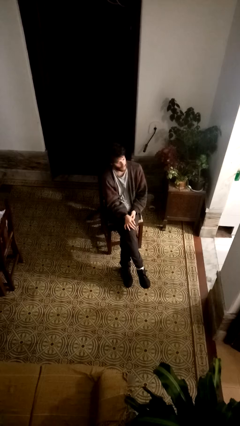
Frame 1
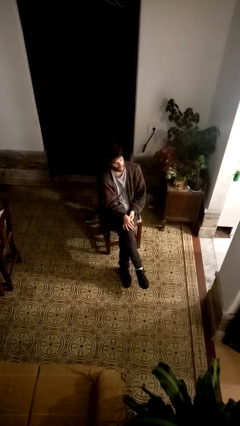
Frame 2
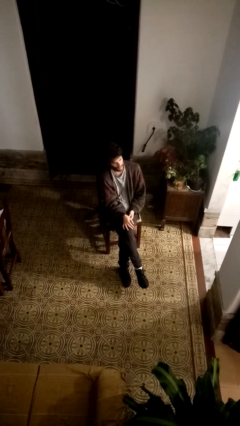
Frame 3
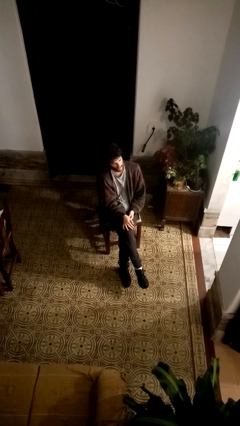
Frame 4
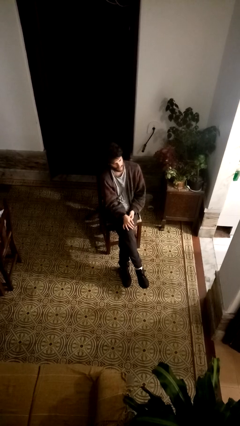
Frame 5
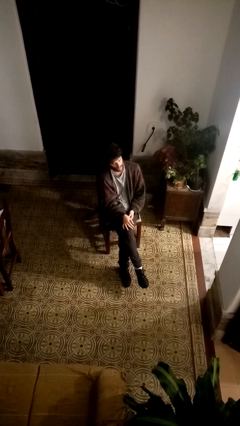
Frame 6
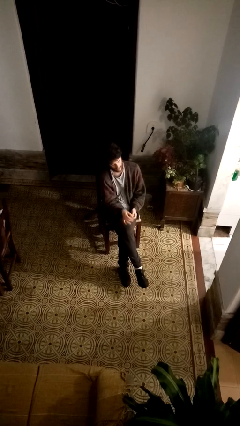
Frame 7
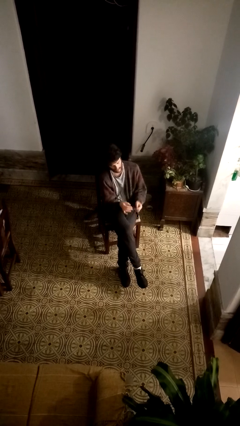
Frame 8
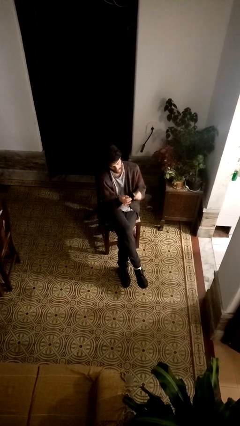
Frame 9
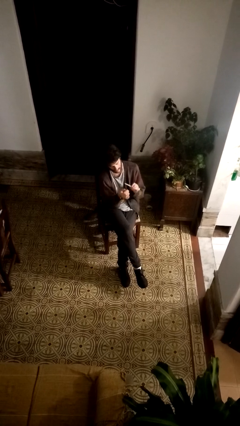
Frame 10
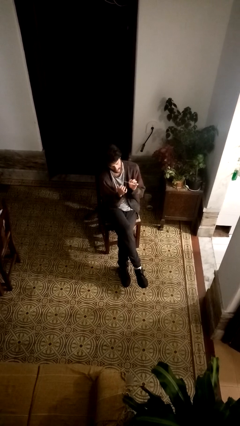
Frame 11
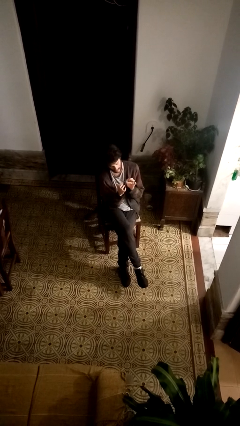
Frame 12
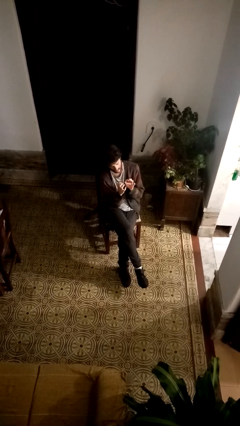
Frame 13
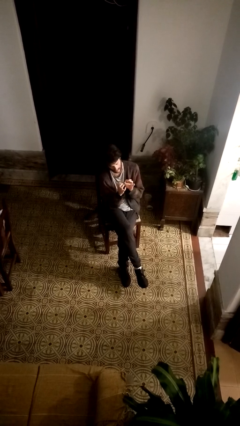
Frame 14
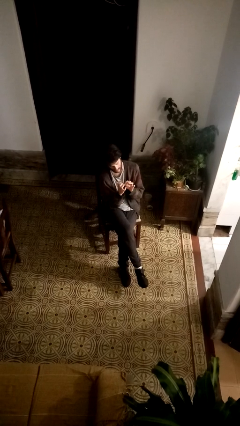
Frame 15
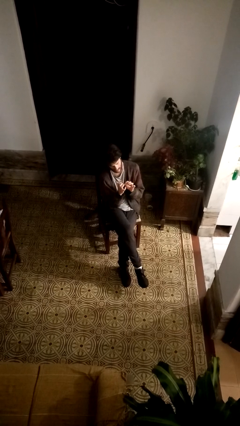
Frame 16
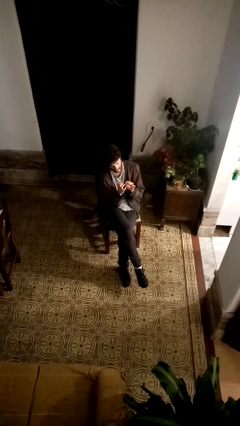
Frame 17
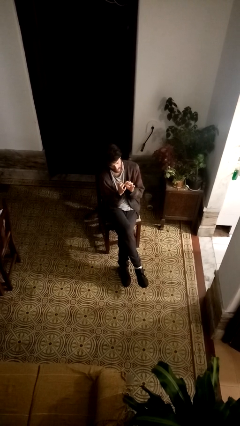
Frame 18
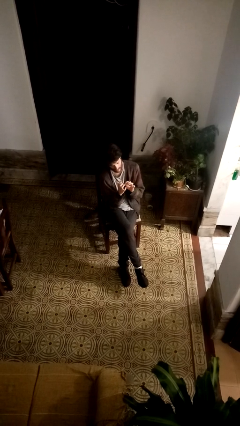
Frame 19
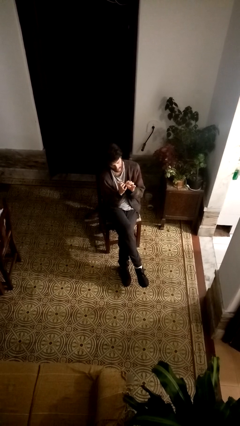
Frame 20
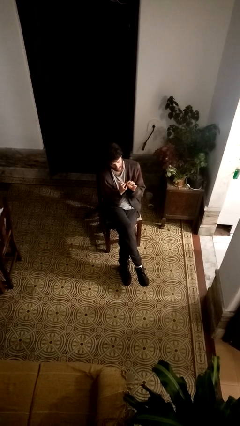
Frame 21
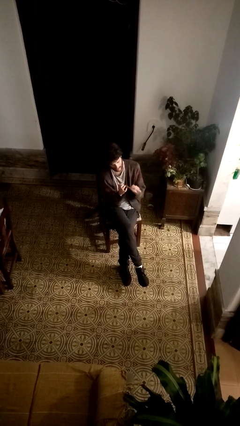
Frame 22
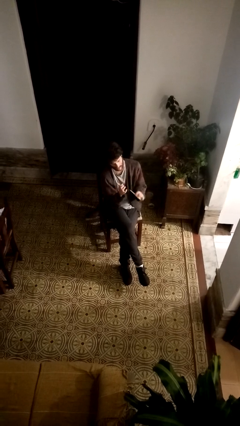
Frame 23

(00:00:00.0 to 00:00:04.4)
person files fingernails

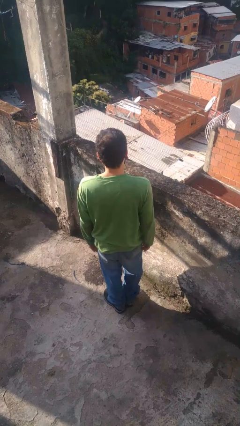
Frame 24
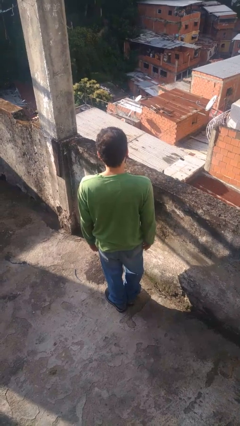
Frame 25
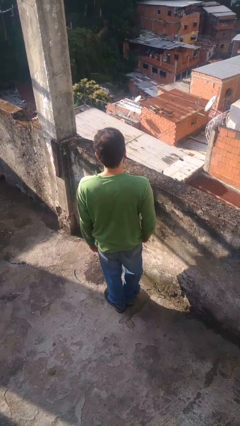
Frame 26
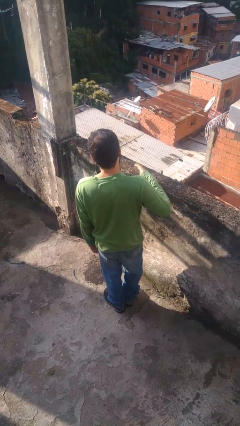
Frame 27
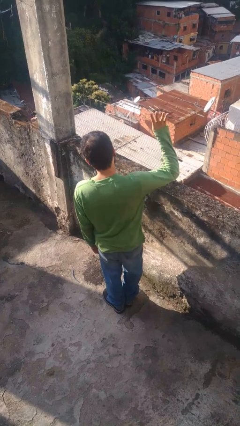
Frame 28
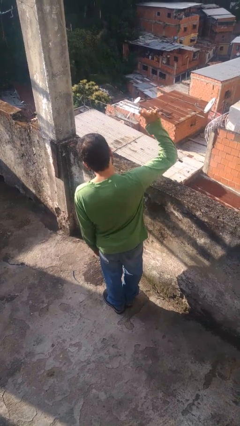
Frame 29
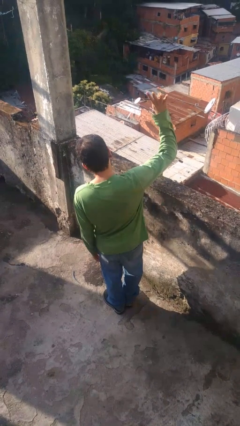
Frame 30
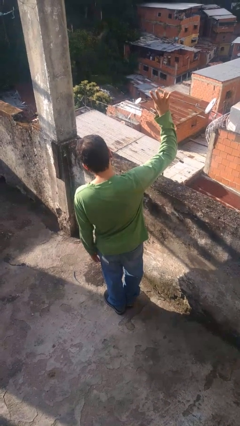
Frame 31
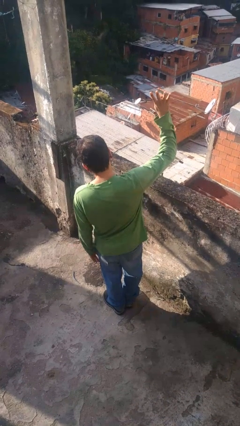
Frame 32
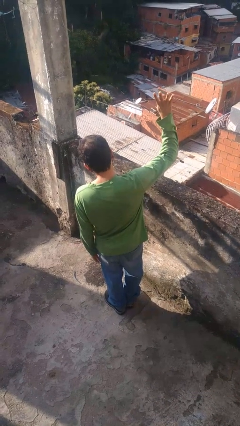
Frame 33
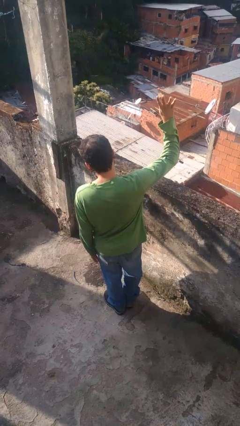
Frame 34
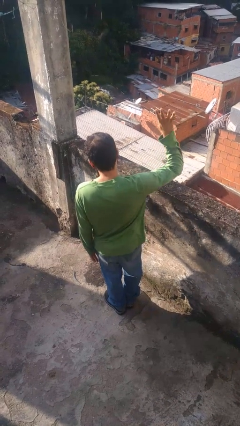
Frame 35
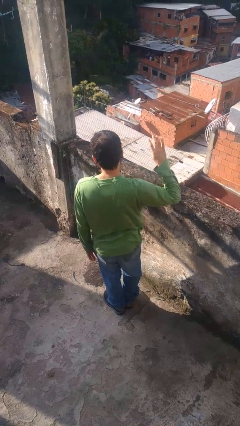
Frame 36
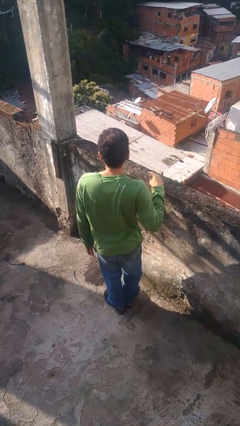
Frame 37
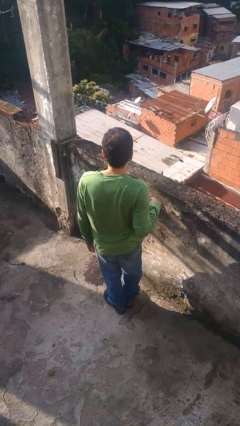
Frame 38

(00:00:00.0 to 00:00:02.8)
person gestures number four

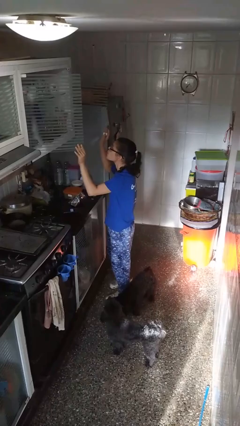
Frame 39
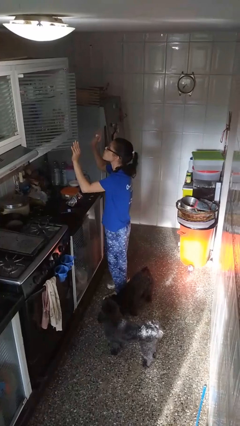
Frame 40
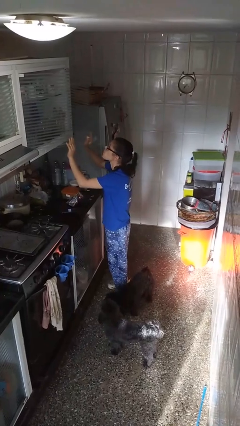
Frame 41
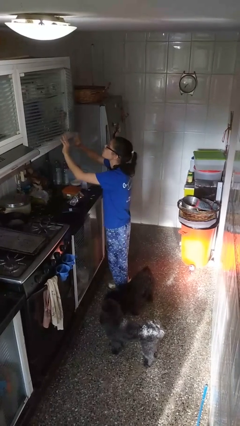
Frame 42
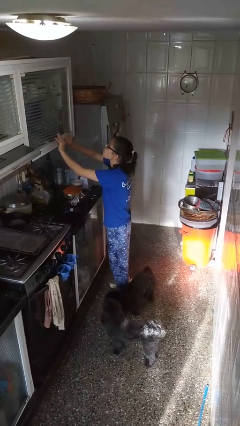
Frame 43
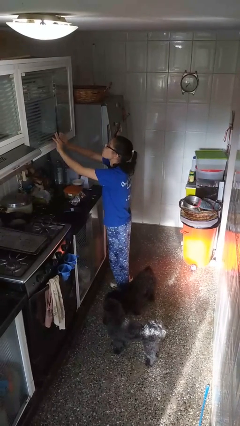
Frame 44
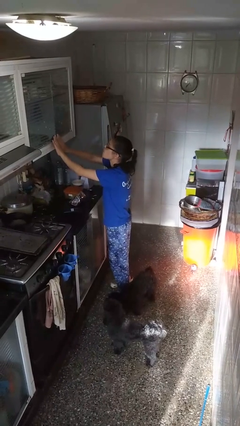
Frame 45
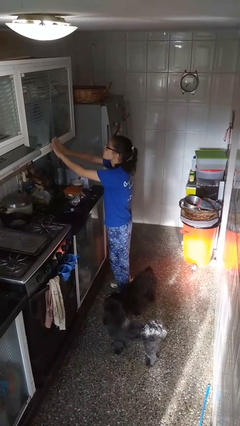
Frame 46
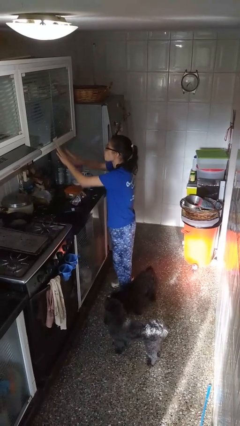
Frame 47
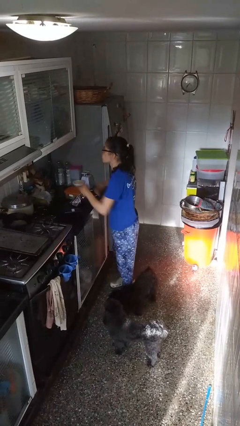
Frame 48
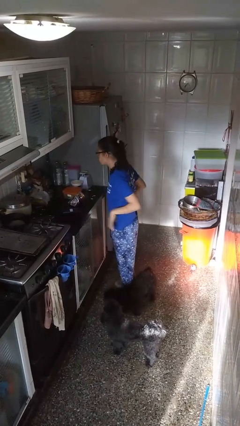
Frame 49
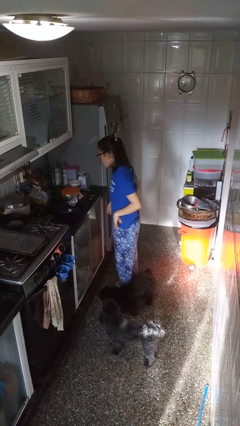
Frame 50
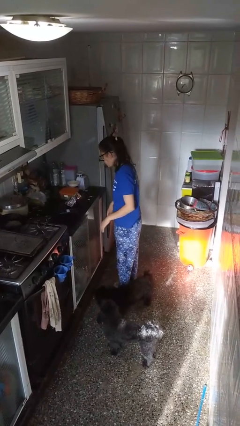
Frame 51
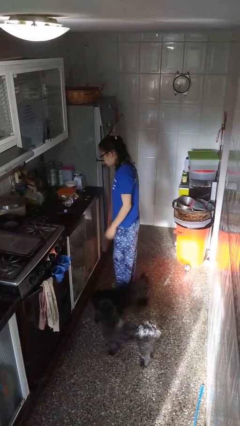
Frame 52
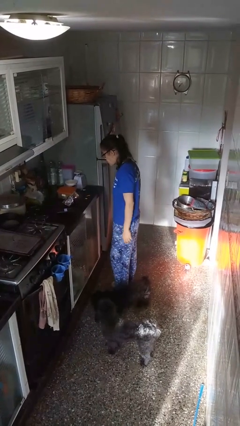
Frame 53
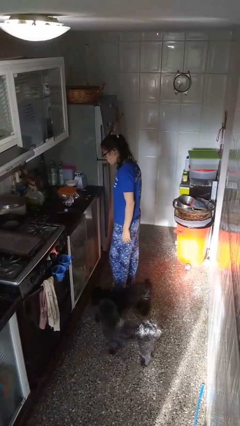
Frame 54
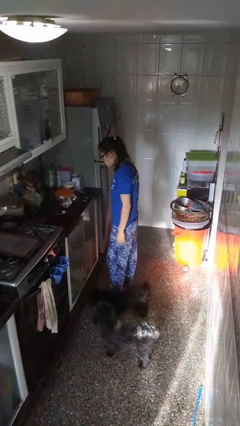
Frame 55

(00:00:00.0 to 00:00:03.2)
person closes cabinet

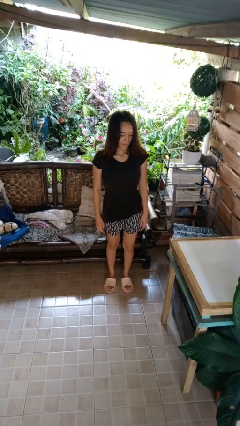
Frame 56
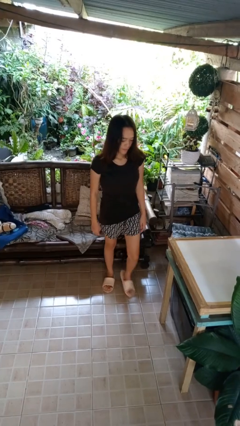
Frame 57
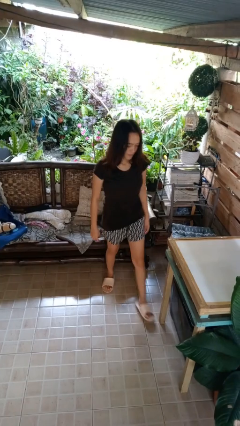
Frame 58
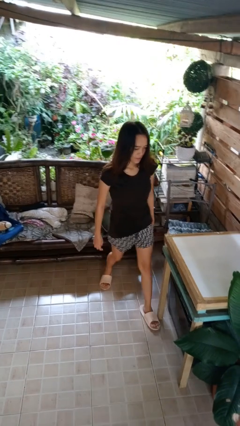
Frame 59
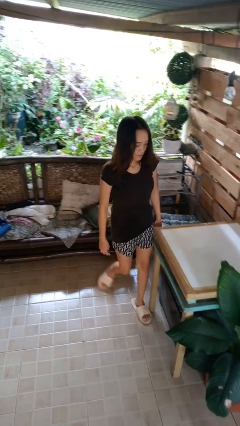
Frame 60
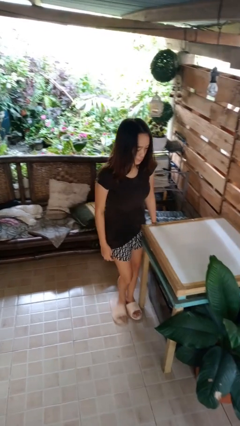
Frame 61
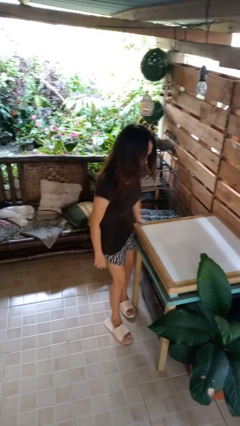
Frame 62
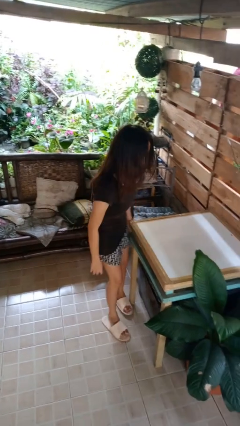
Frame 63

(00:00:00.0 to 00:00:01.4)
person bumps into table

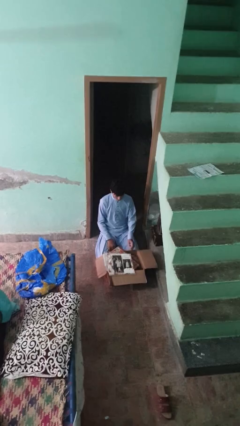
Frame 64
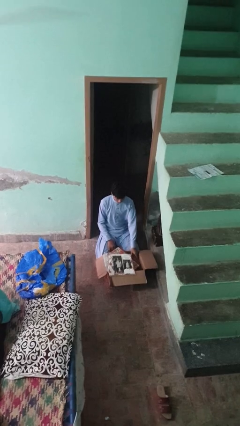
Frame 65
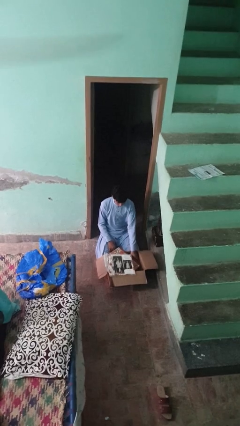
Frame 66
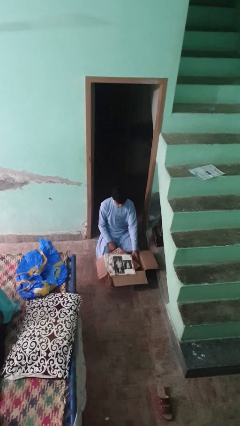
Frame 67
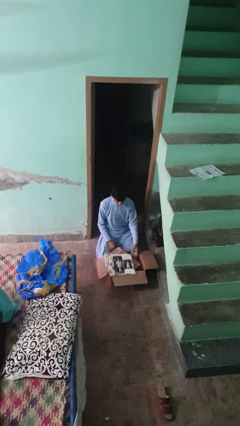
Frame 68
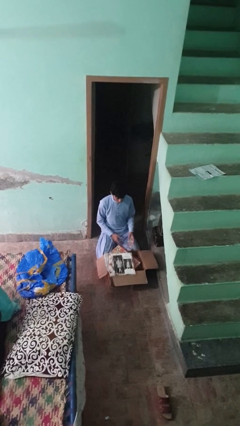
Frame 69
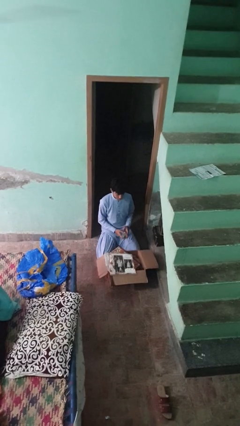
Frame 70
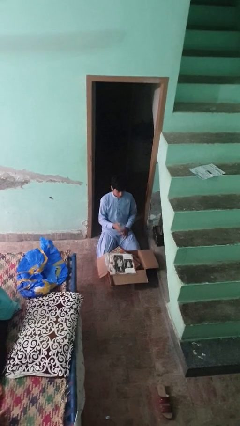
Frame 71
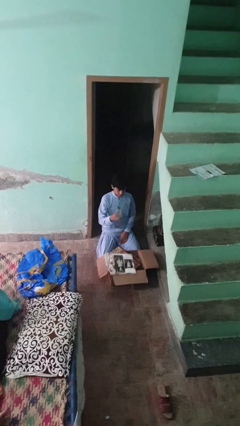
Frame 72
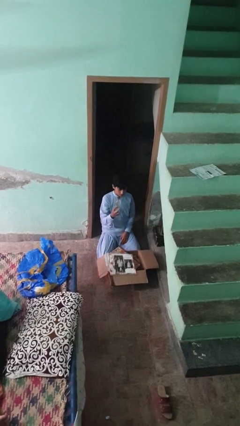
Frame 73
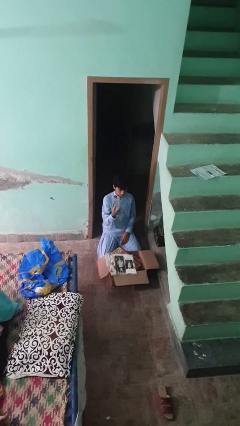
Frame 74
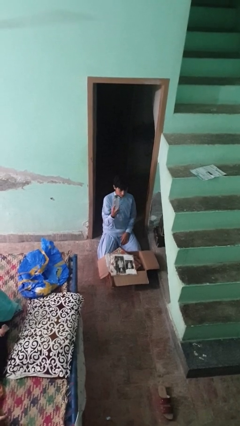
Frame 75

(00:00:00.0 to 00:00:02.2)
person takes object from box

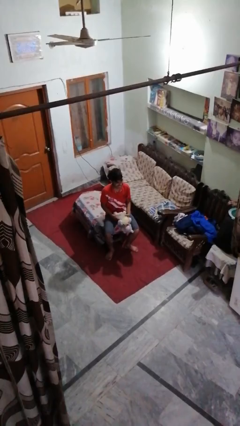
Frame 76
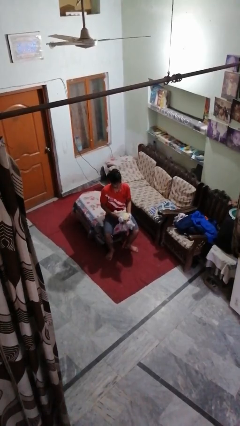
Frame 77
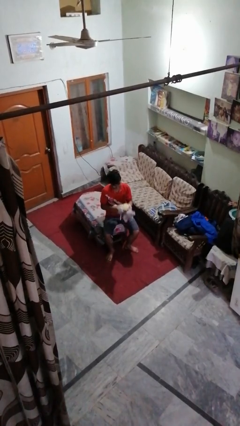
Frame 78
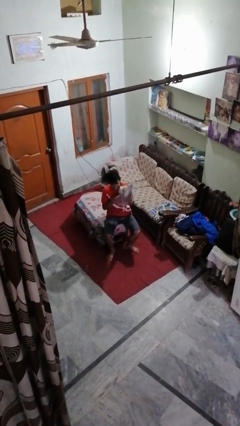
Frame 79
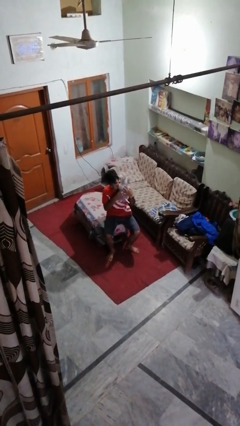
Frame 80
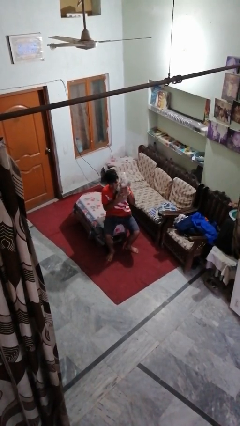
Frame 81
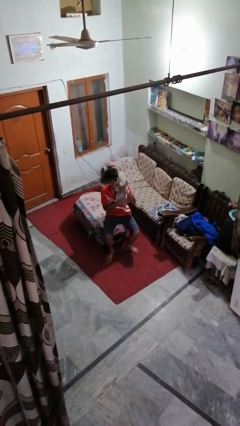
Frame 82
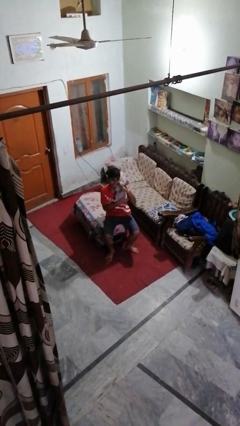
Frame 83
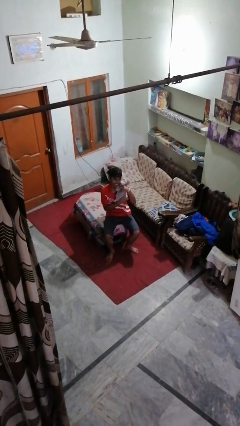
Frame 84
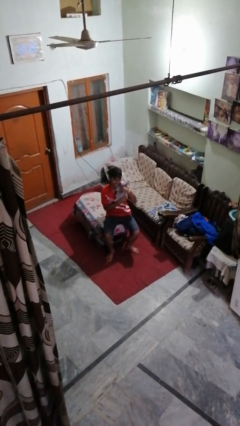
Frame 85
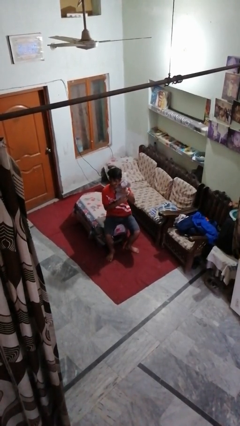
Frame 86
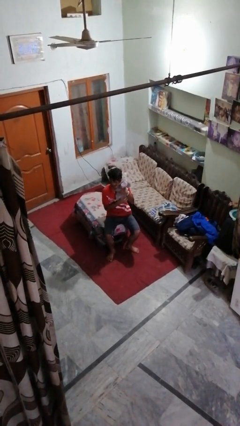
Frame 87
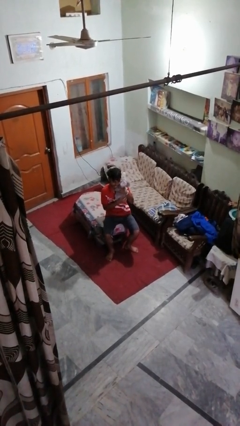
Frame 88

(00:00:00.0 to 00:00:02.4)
person hugs stuffed animal

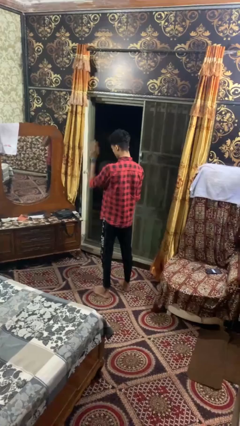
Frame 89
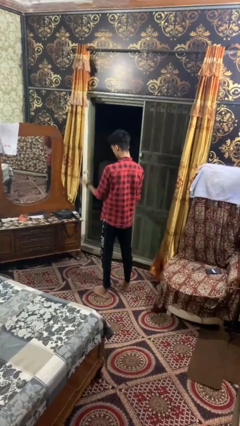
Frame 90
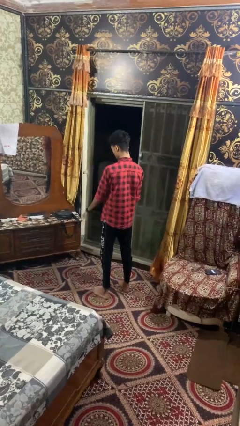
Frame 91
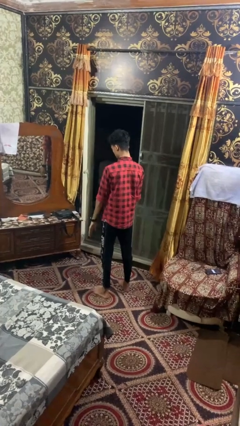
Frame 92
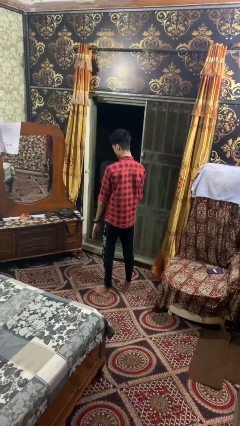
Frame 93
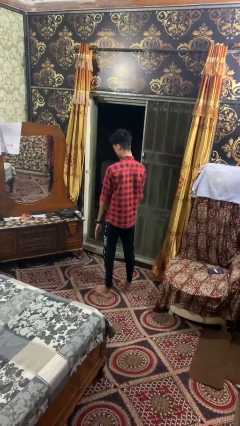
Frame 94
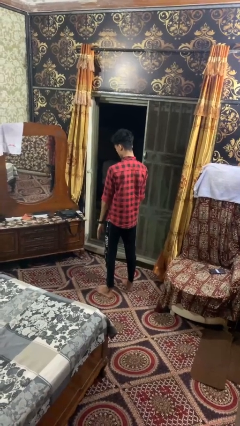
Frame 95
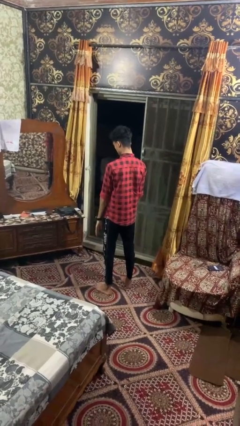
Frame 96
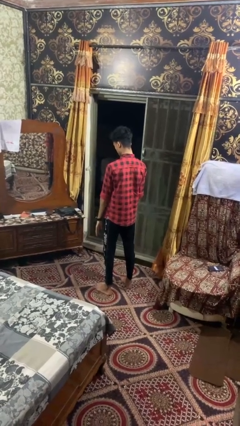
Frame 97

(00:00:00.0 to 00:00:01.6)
person gestures lower hand
